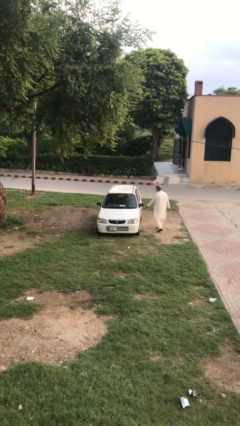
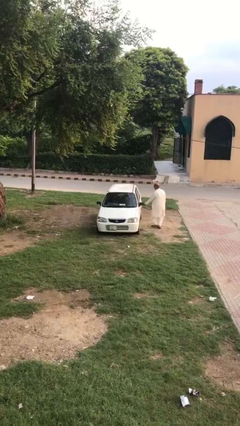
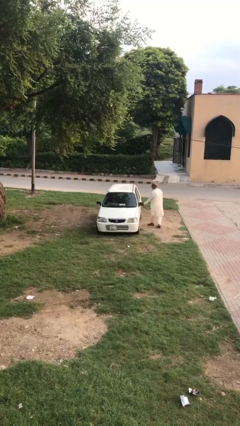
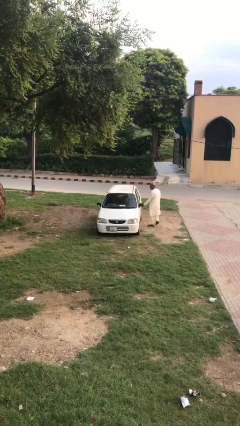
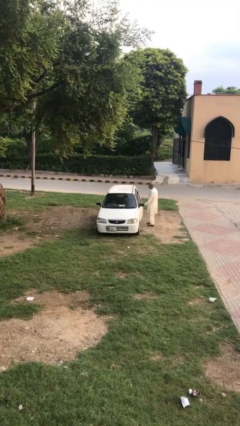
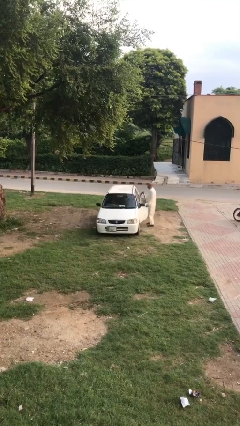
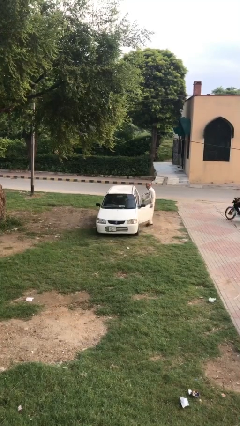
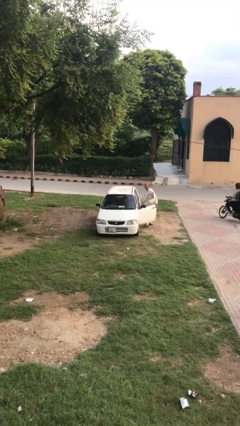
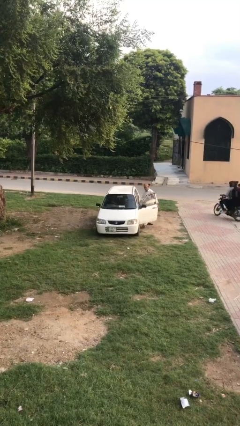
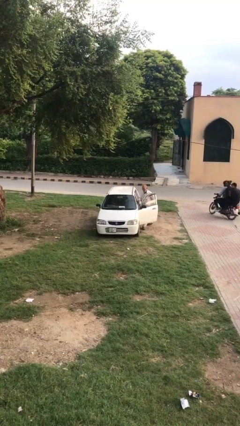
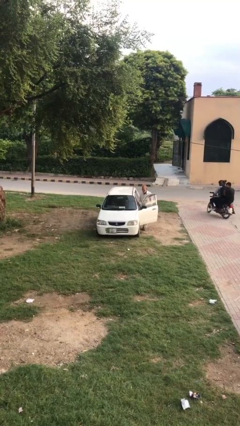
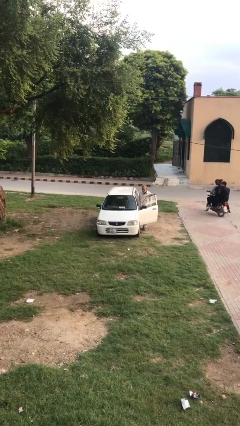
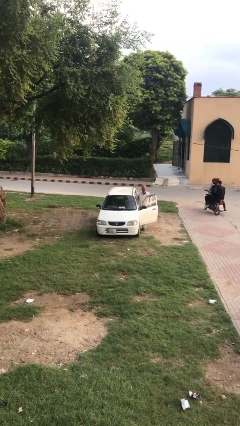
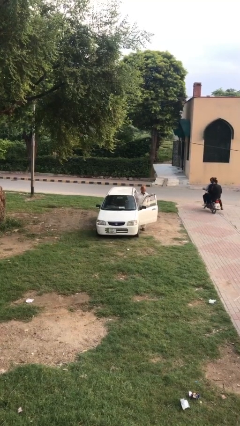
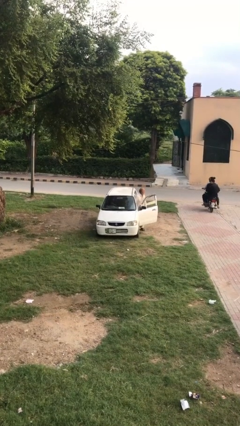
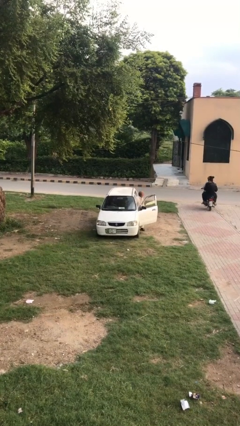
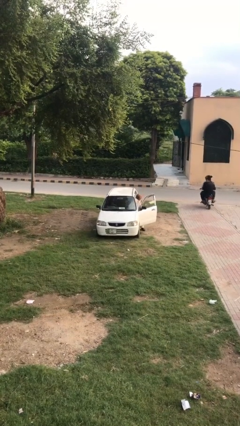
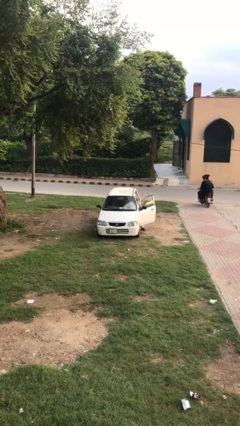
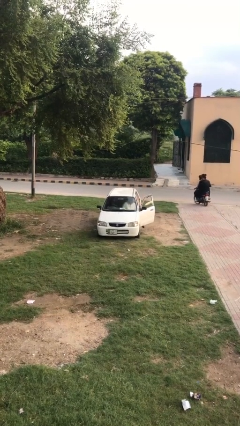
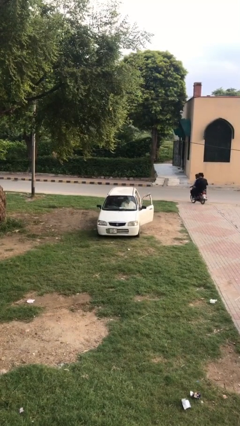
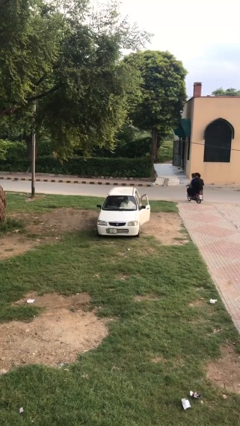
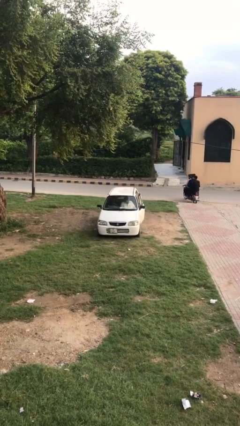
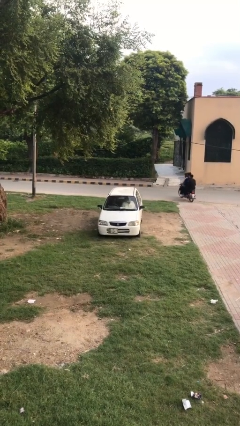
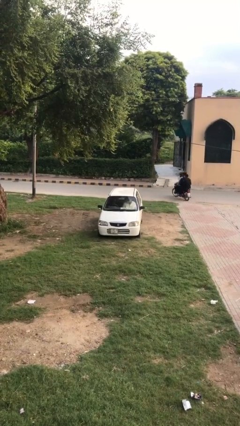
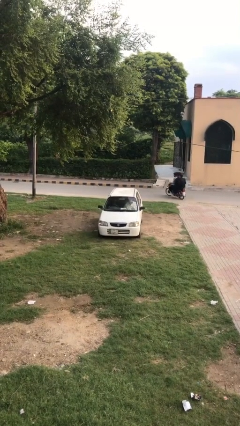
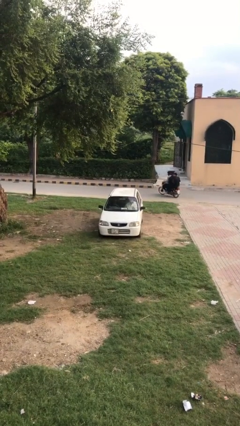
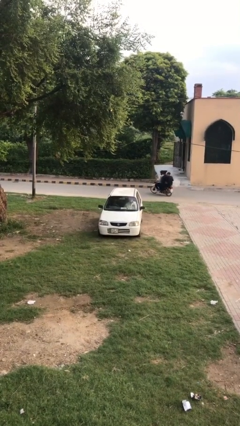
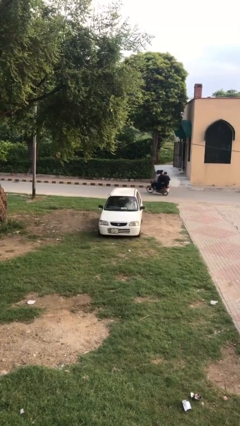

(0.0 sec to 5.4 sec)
car picks up person

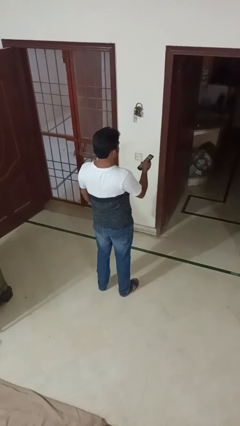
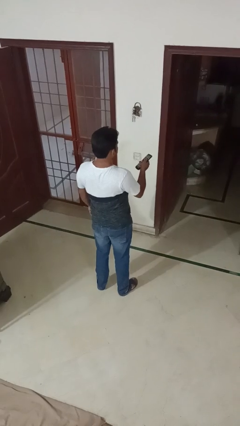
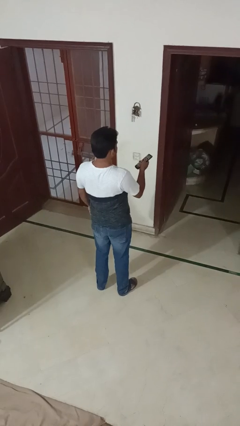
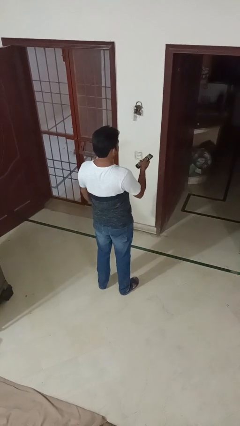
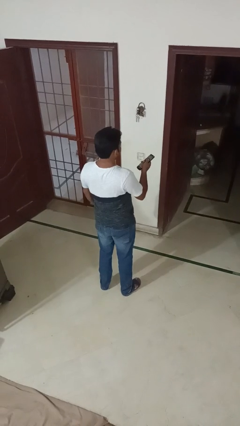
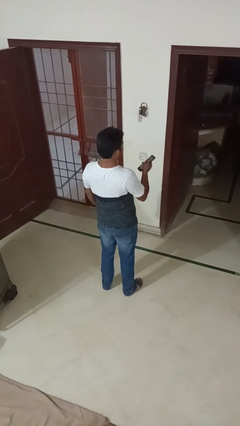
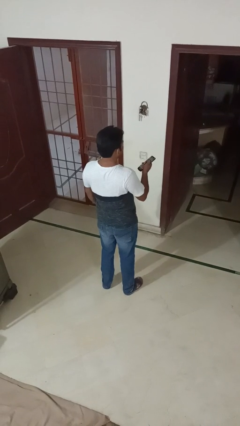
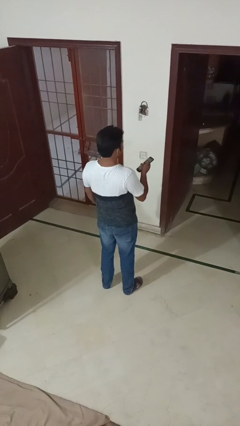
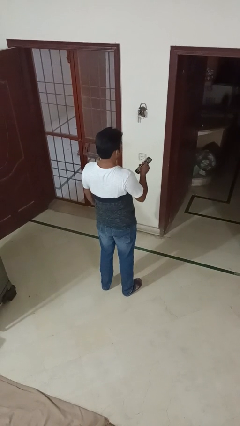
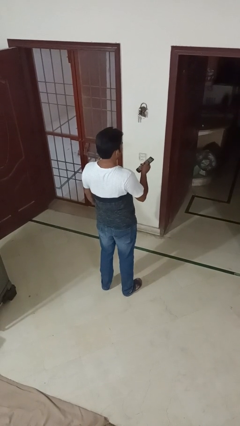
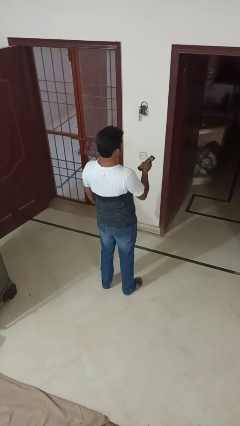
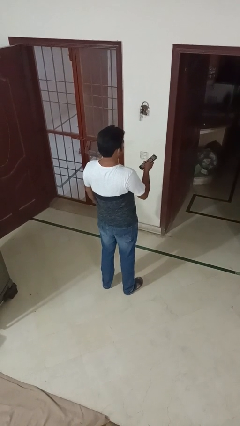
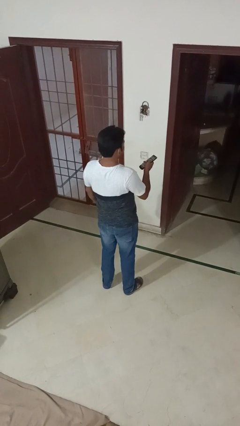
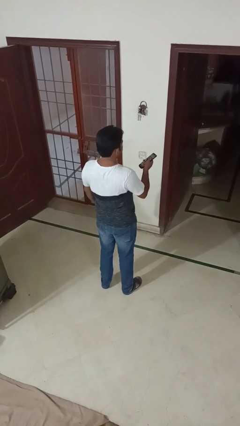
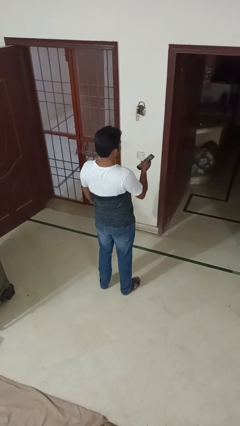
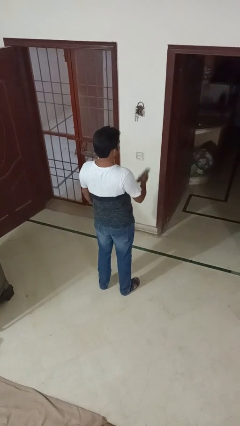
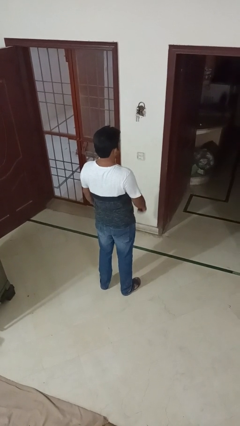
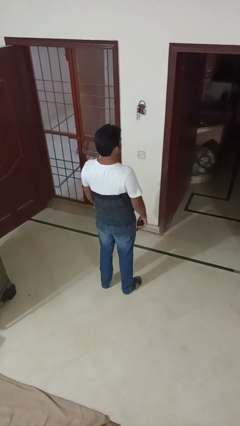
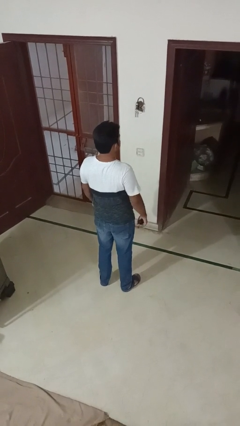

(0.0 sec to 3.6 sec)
person uses television remote

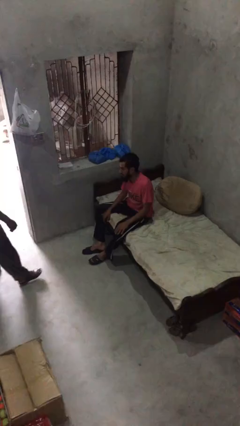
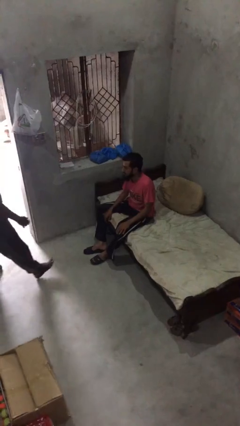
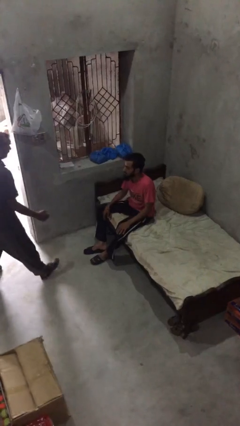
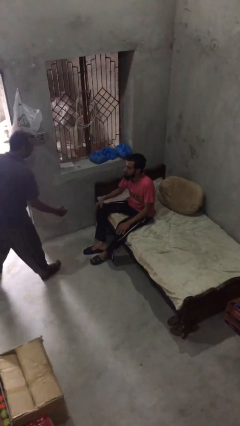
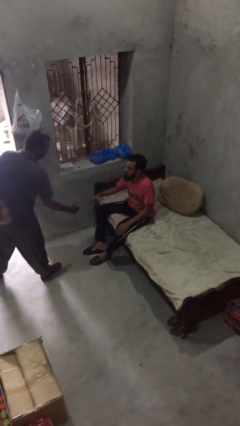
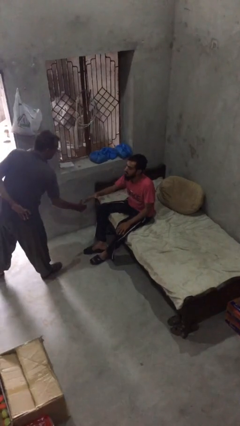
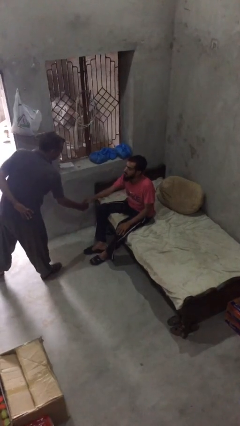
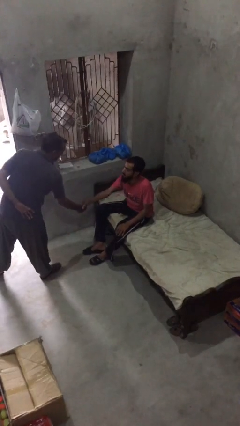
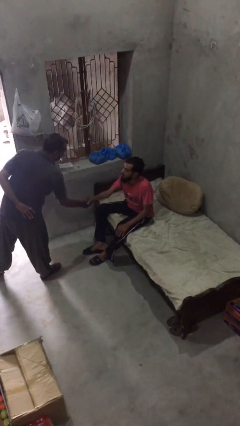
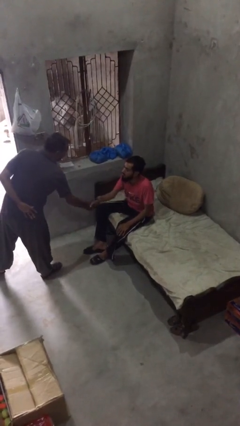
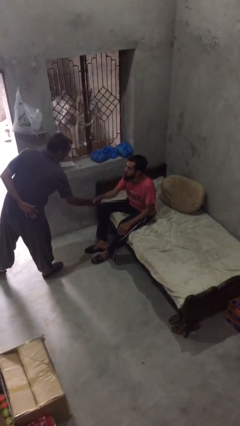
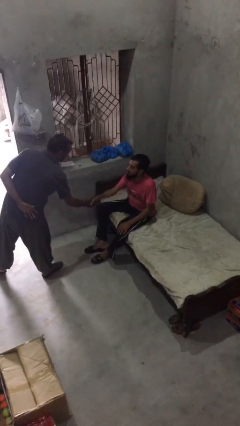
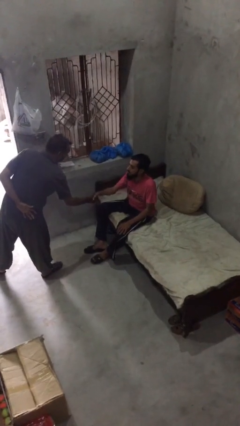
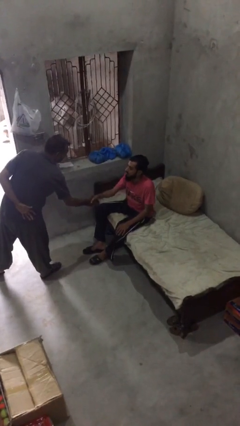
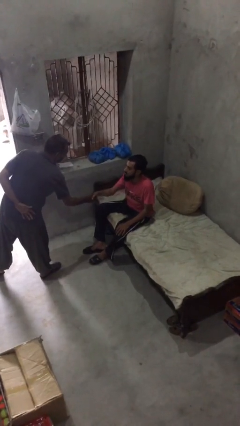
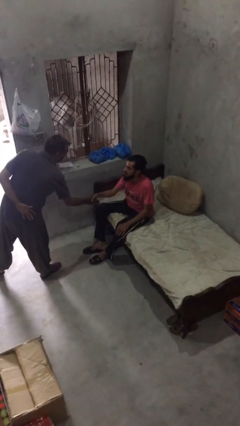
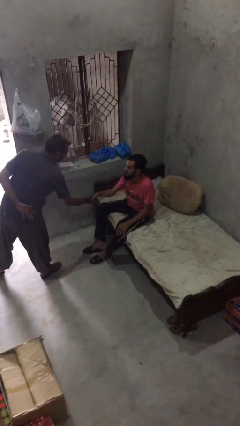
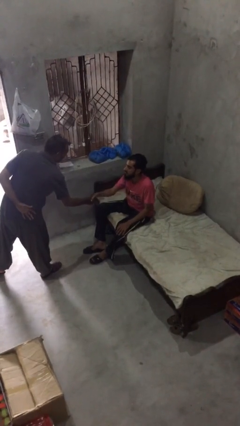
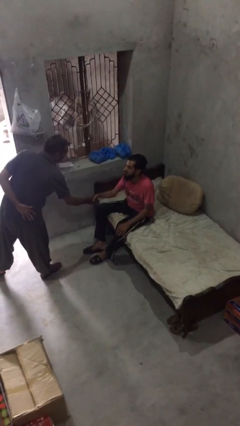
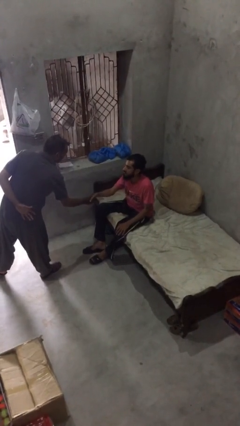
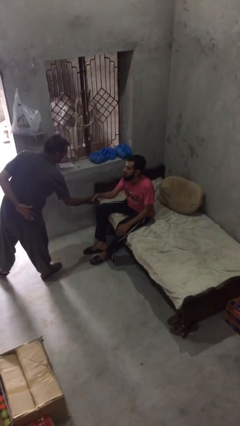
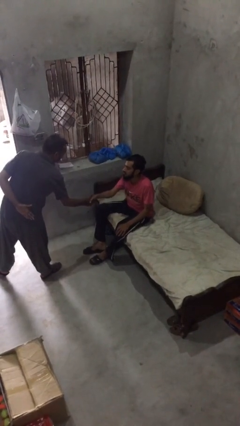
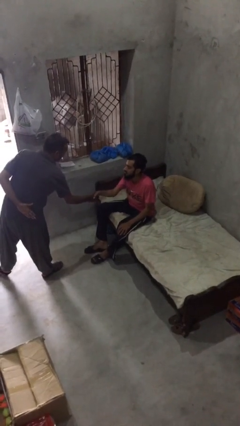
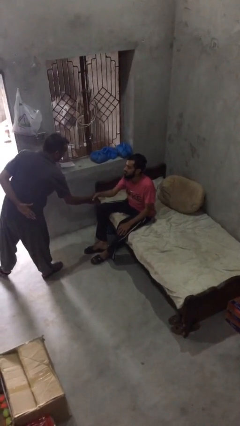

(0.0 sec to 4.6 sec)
person shakes hand

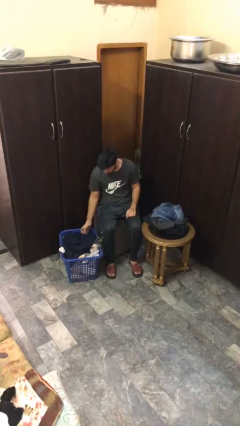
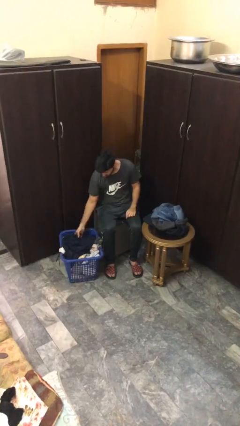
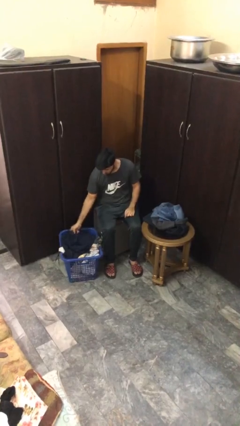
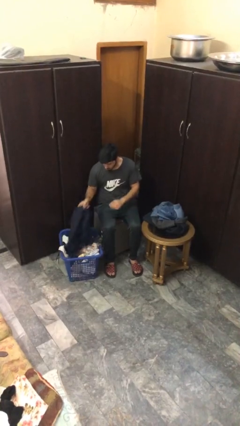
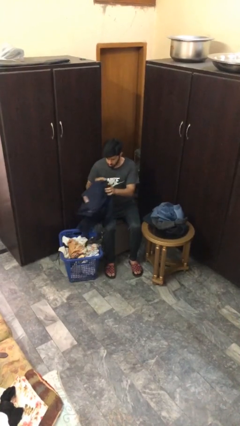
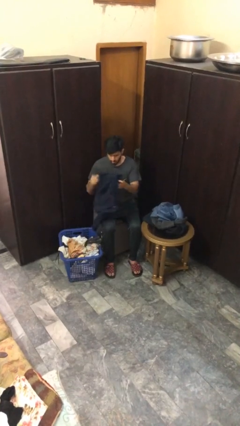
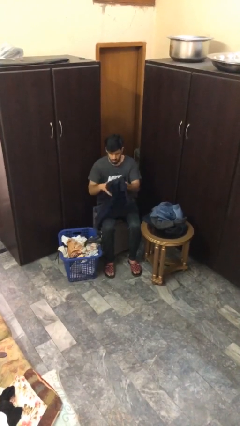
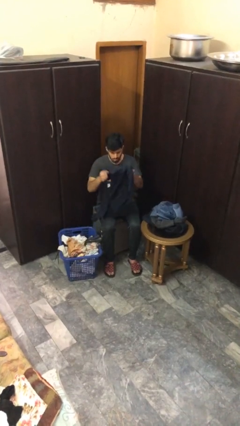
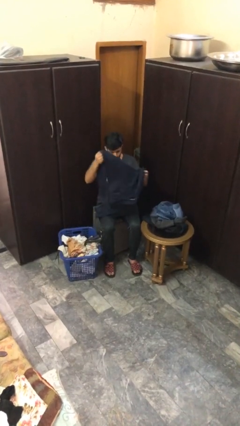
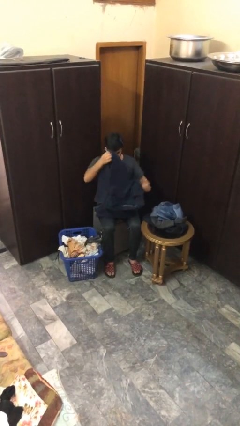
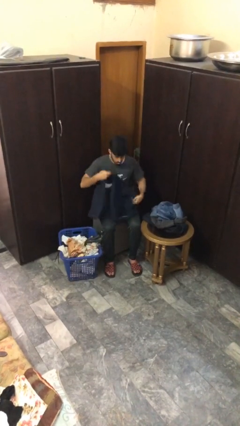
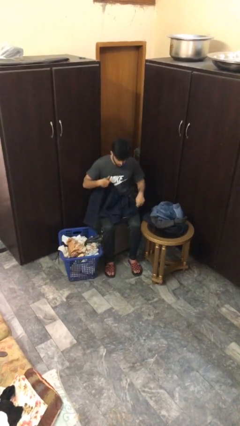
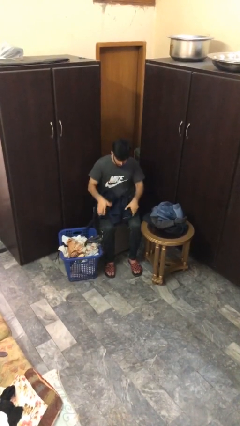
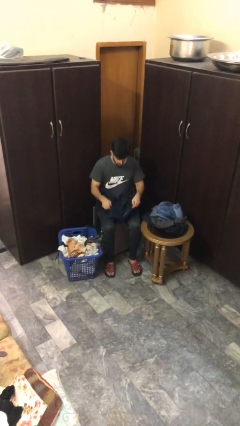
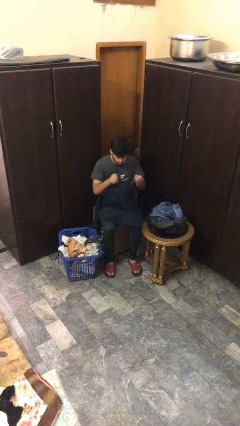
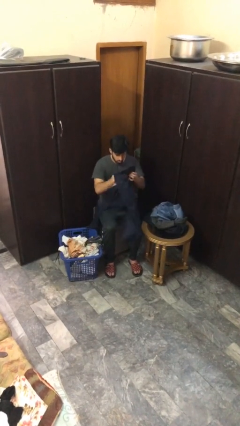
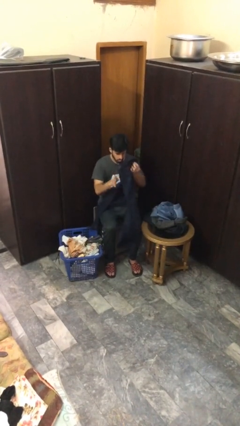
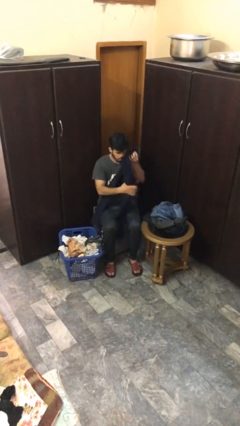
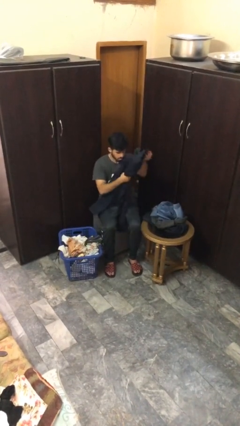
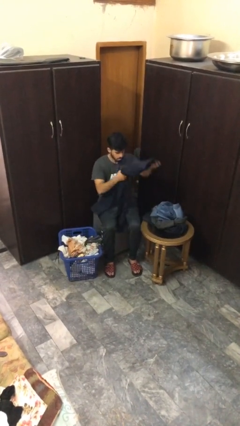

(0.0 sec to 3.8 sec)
person folds pants
